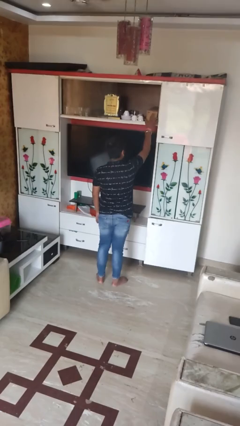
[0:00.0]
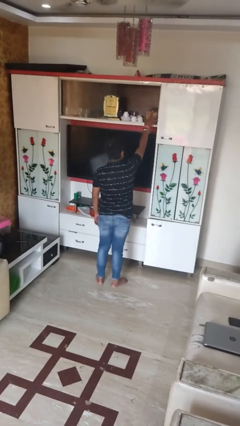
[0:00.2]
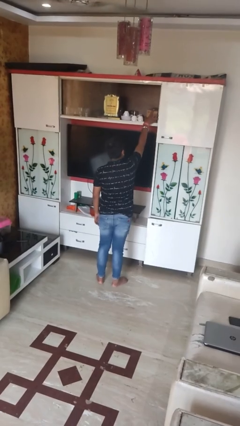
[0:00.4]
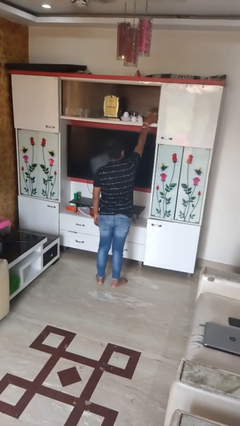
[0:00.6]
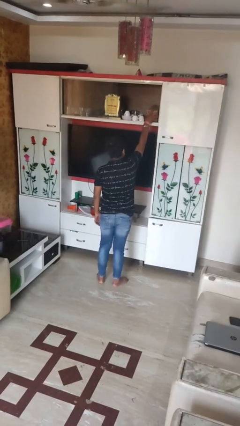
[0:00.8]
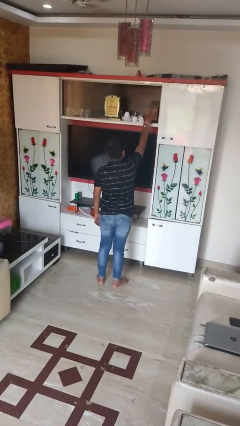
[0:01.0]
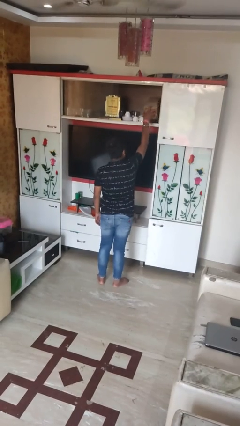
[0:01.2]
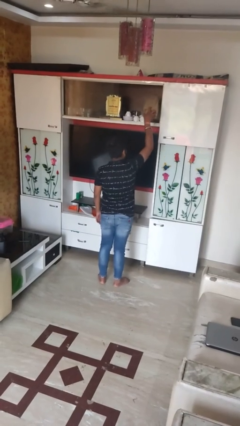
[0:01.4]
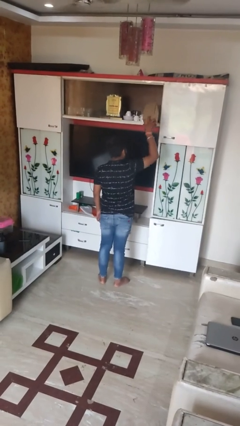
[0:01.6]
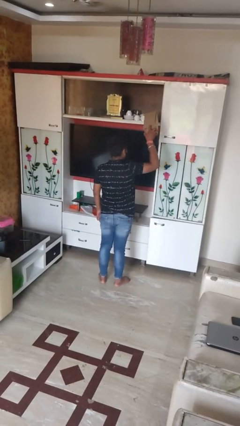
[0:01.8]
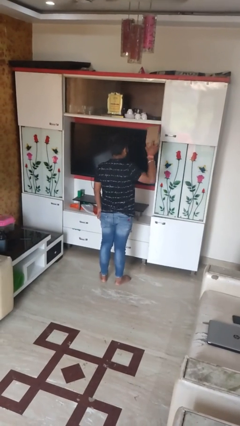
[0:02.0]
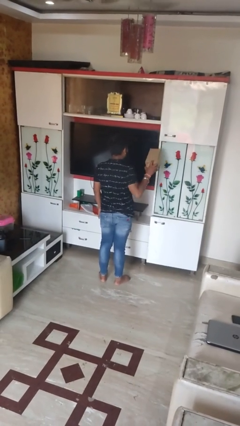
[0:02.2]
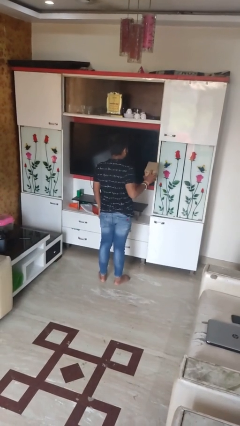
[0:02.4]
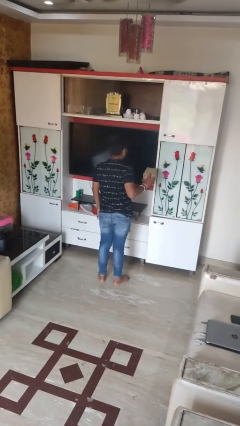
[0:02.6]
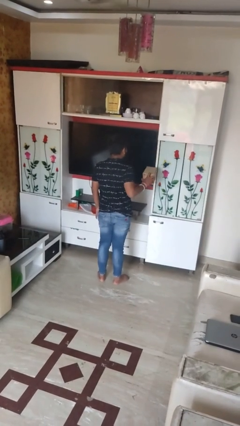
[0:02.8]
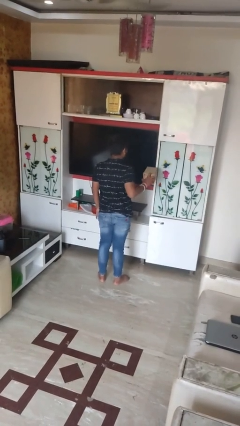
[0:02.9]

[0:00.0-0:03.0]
person picks up object from shelf

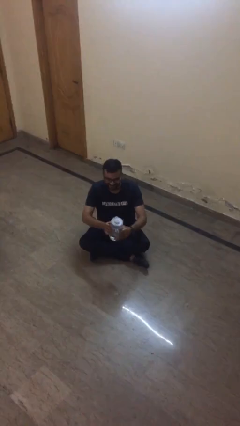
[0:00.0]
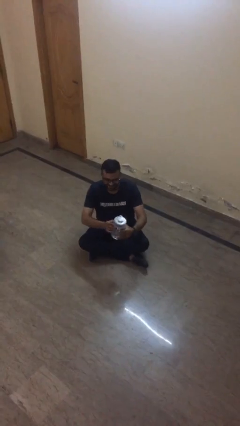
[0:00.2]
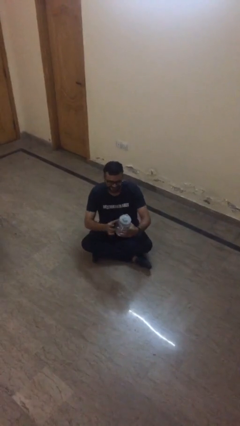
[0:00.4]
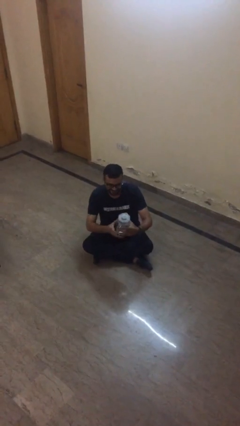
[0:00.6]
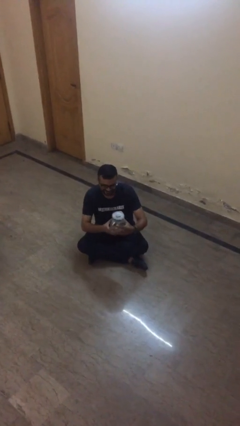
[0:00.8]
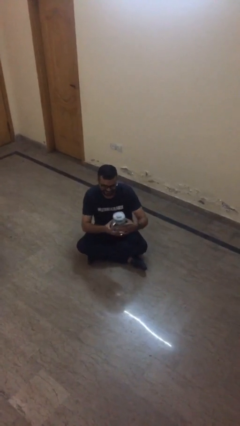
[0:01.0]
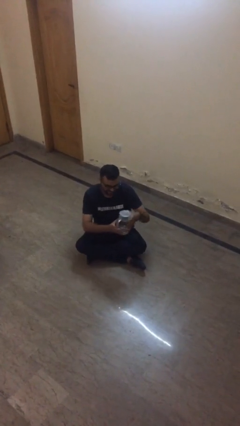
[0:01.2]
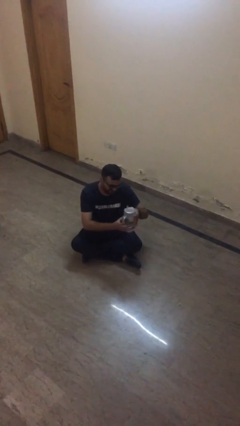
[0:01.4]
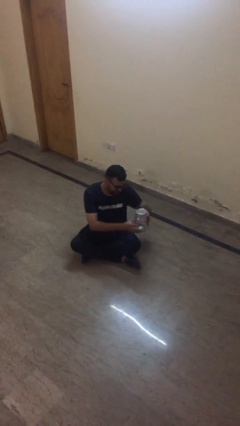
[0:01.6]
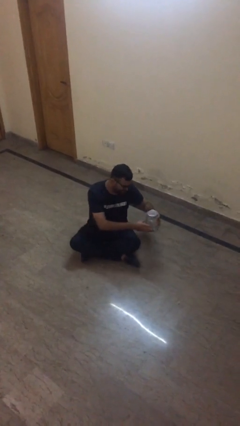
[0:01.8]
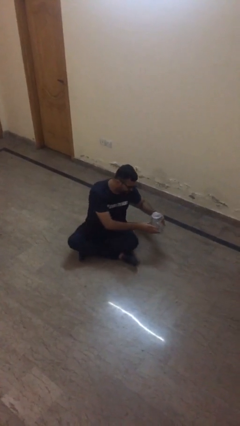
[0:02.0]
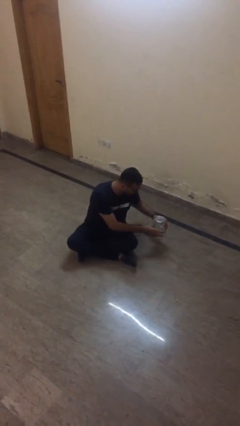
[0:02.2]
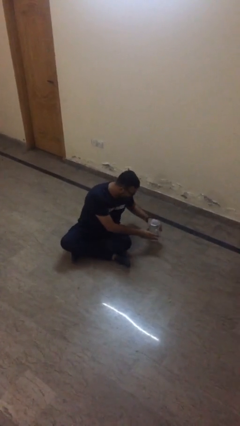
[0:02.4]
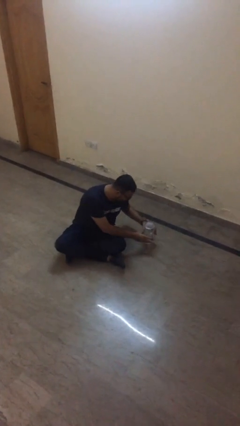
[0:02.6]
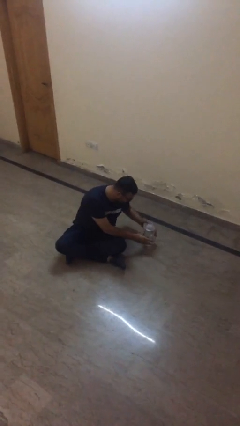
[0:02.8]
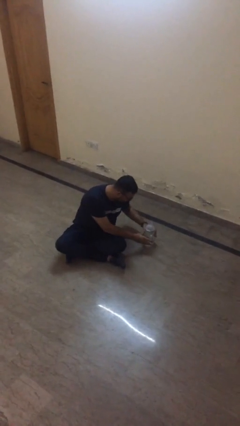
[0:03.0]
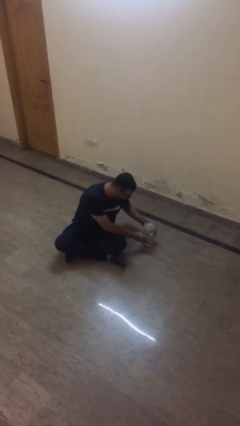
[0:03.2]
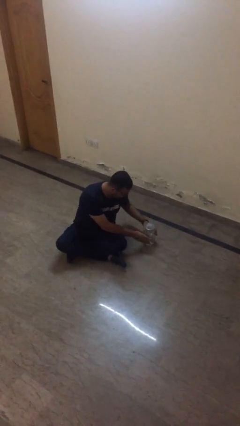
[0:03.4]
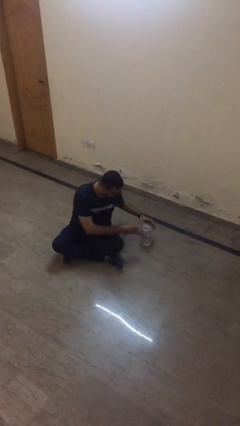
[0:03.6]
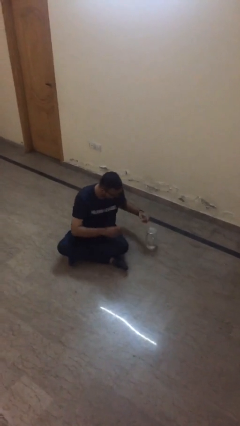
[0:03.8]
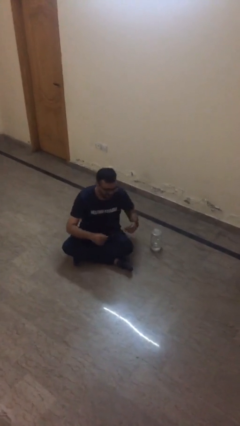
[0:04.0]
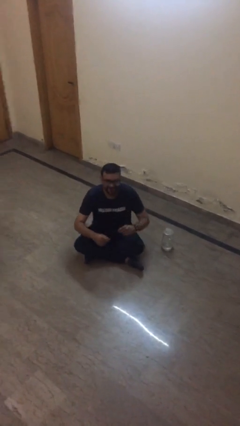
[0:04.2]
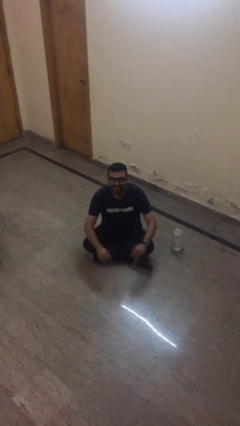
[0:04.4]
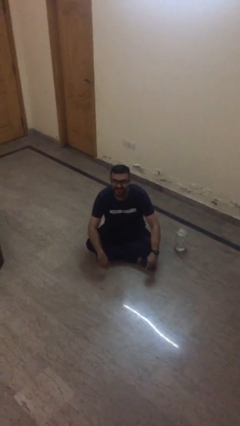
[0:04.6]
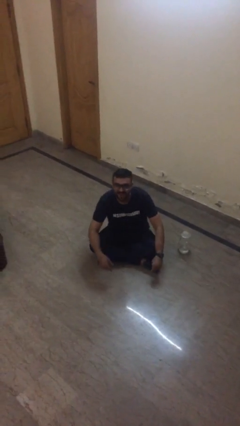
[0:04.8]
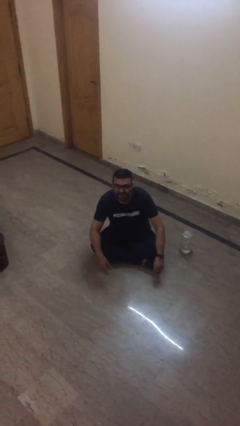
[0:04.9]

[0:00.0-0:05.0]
person puts down object on floor

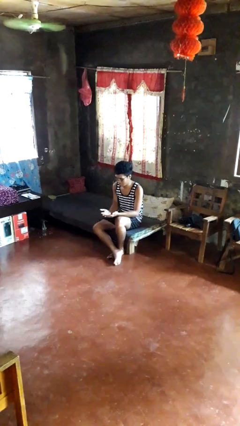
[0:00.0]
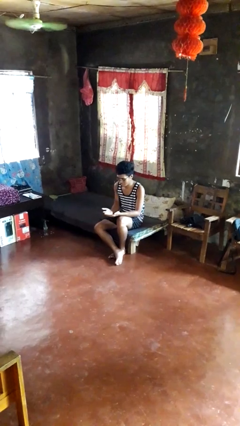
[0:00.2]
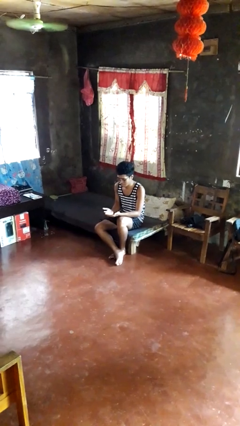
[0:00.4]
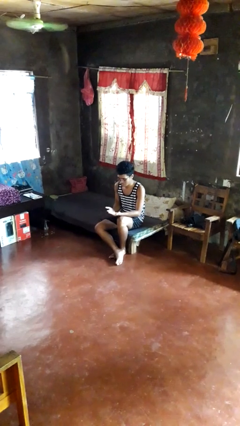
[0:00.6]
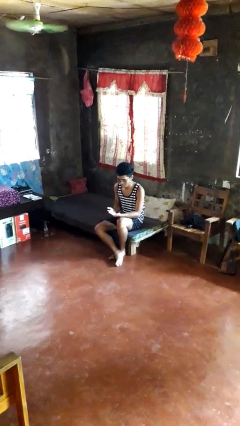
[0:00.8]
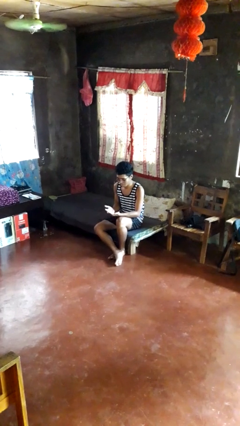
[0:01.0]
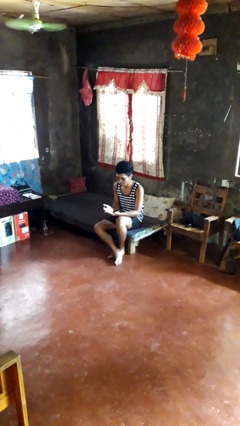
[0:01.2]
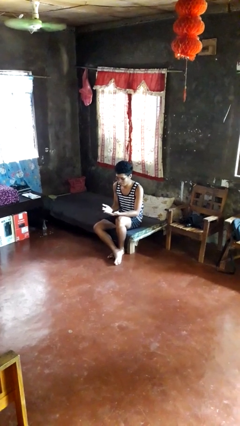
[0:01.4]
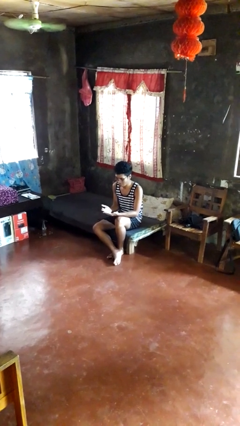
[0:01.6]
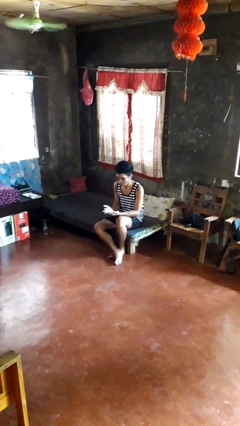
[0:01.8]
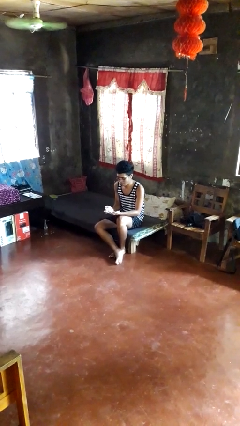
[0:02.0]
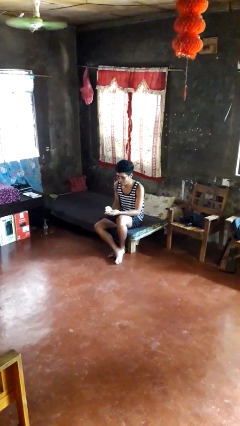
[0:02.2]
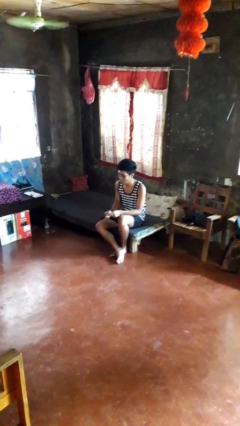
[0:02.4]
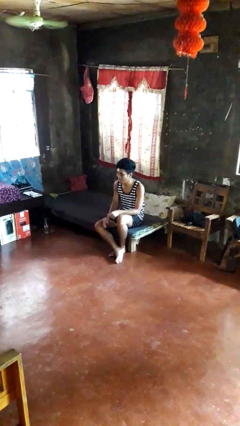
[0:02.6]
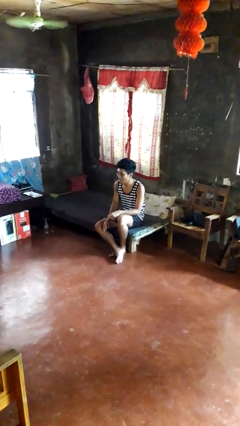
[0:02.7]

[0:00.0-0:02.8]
person looks at hands in lap

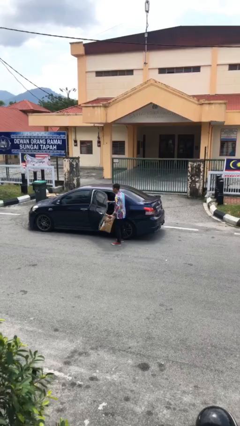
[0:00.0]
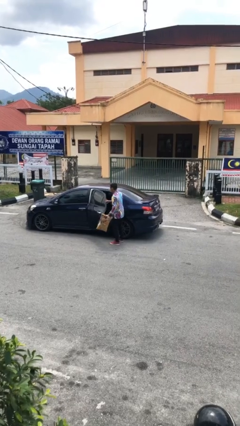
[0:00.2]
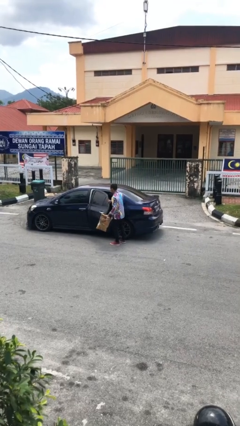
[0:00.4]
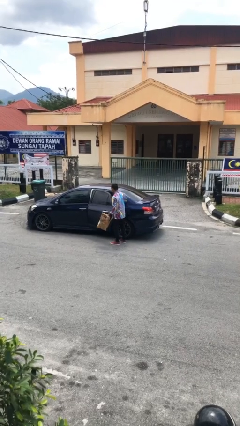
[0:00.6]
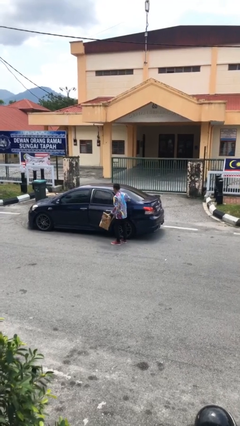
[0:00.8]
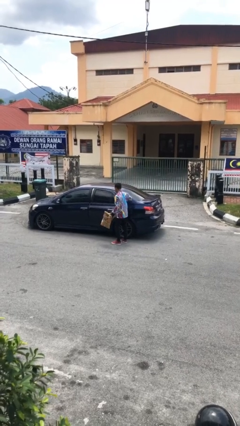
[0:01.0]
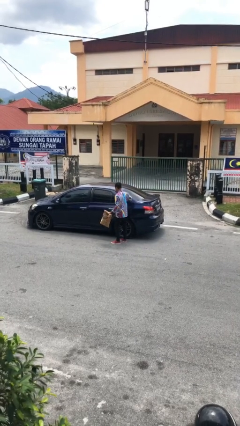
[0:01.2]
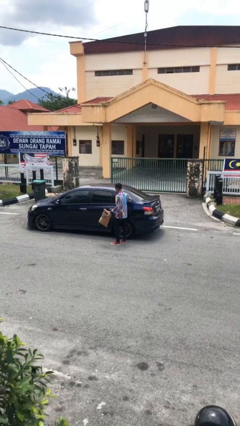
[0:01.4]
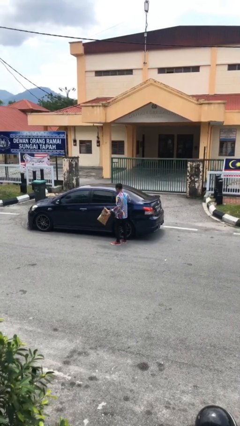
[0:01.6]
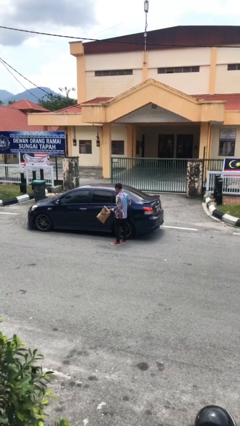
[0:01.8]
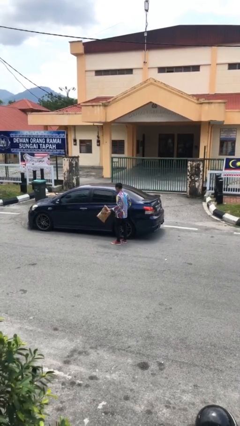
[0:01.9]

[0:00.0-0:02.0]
person closes car door

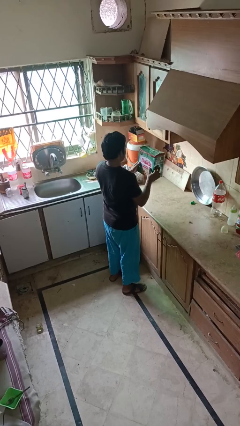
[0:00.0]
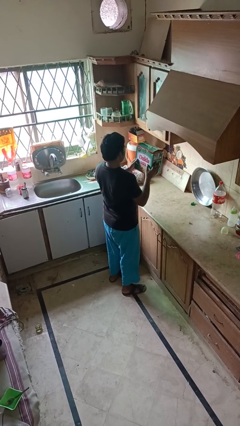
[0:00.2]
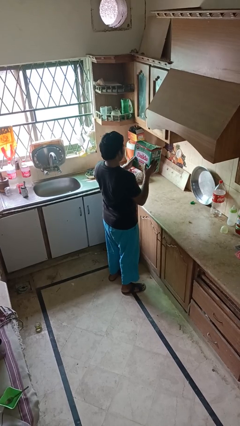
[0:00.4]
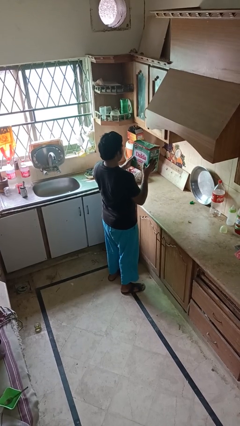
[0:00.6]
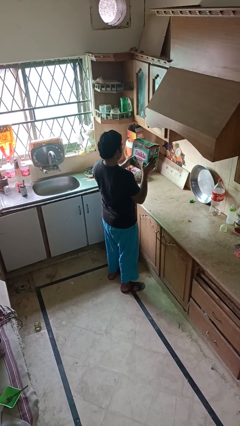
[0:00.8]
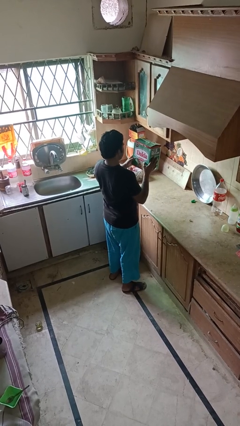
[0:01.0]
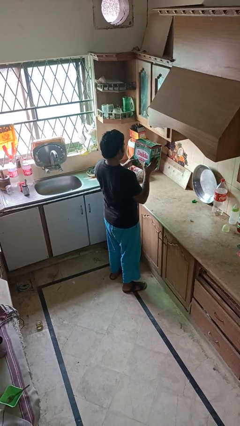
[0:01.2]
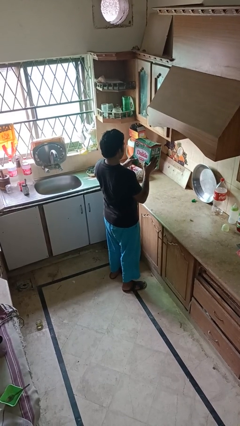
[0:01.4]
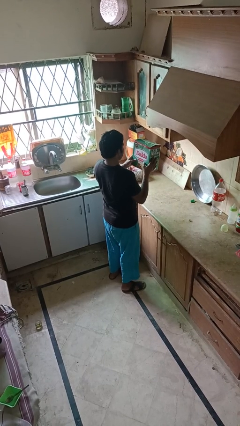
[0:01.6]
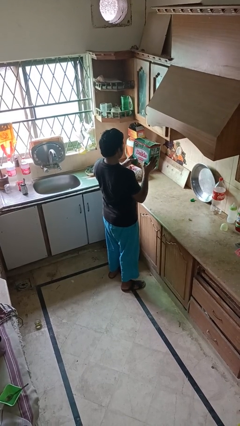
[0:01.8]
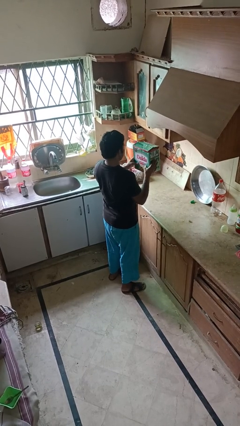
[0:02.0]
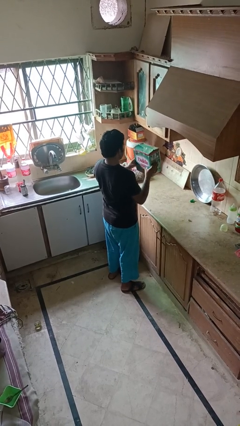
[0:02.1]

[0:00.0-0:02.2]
person picks up object from countertop

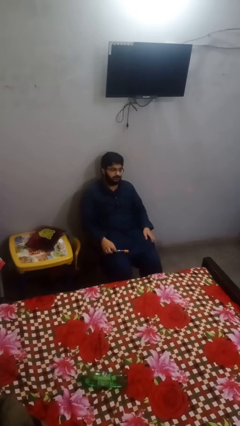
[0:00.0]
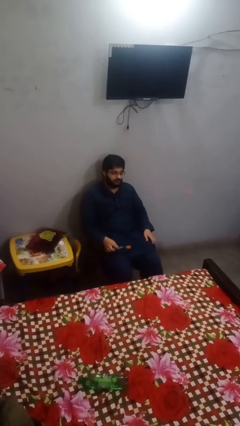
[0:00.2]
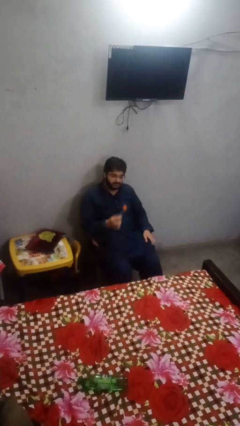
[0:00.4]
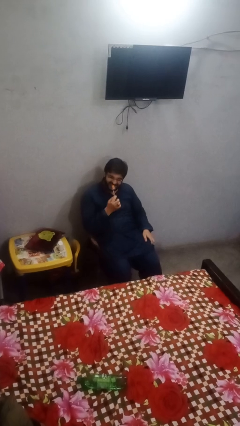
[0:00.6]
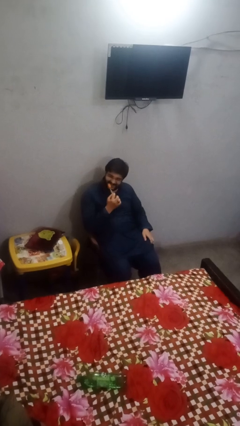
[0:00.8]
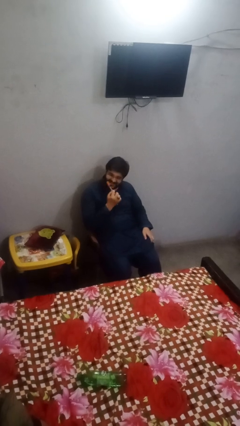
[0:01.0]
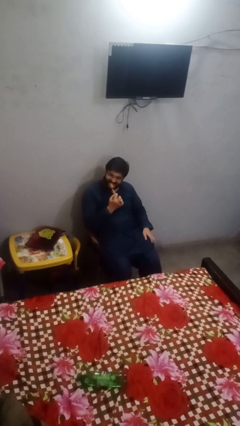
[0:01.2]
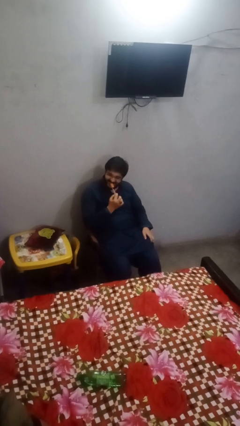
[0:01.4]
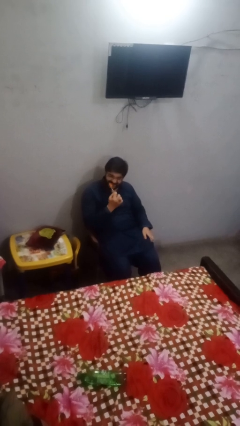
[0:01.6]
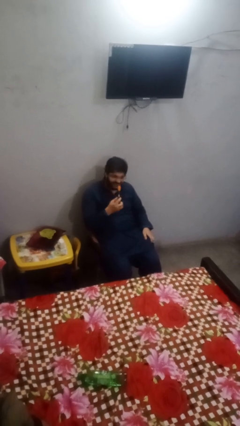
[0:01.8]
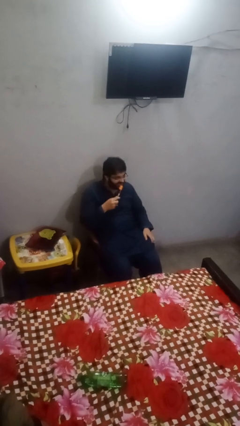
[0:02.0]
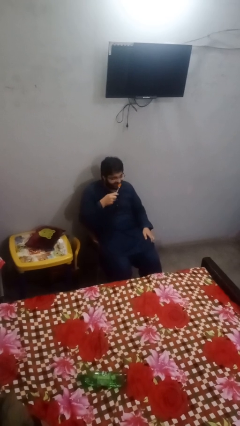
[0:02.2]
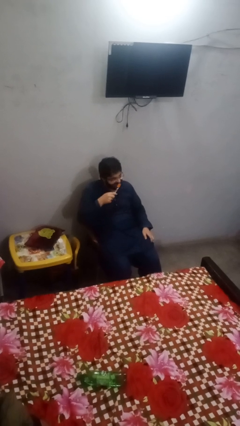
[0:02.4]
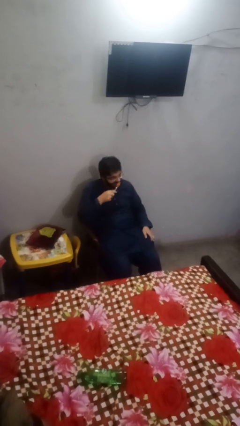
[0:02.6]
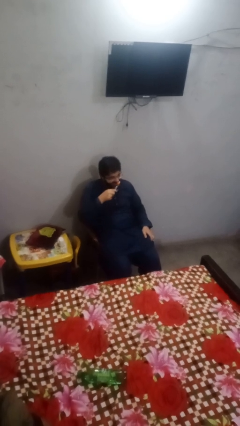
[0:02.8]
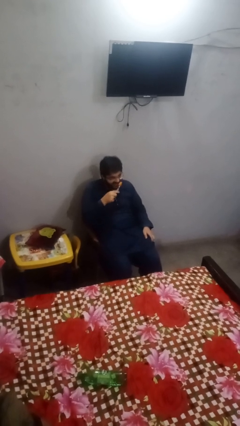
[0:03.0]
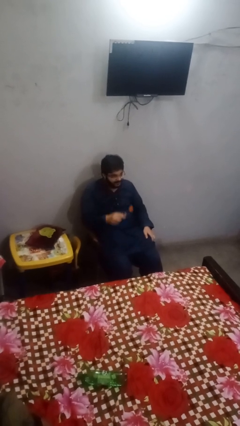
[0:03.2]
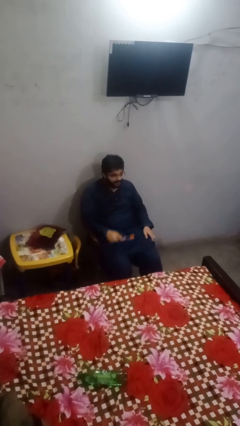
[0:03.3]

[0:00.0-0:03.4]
person brushes teeth
